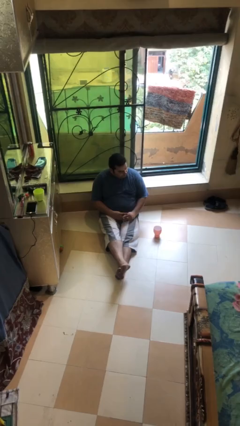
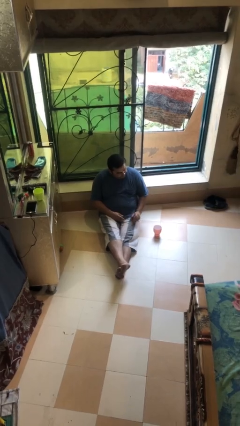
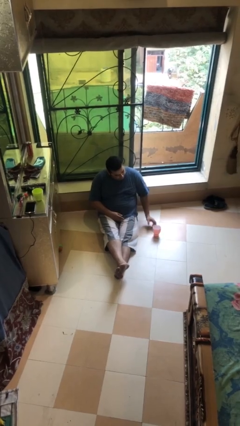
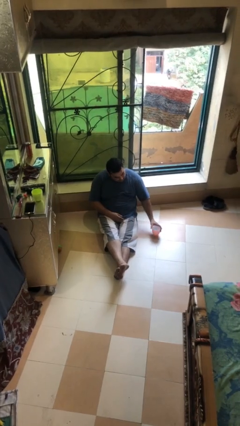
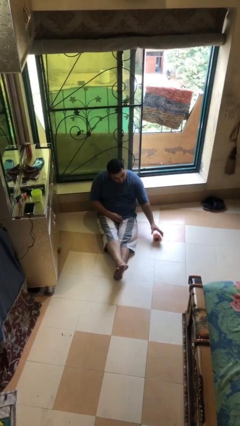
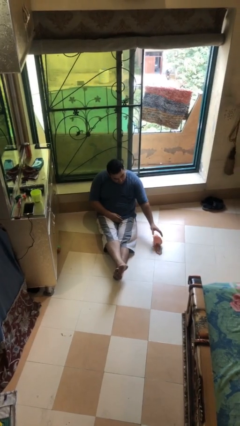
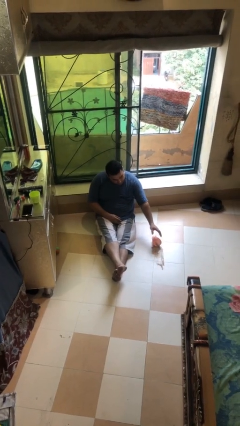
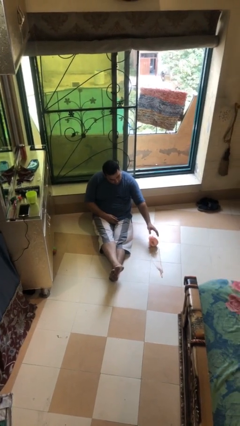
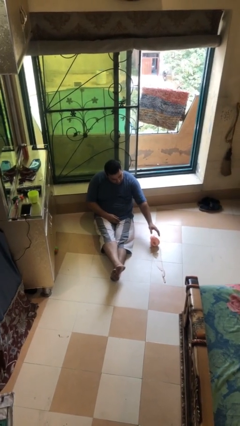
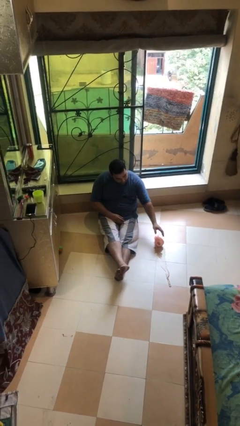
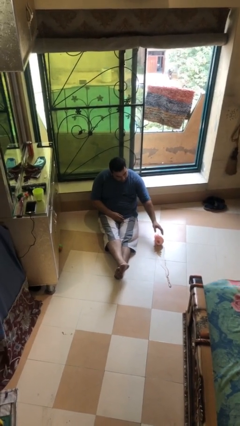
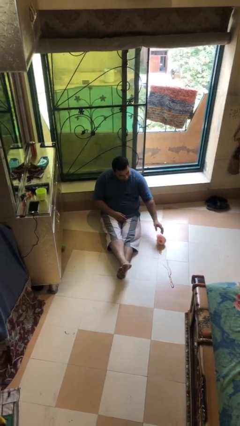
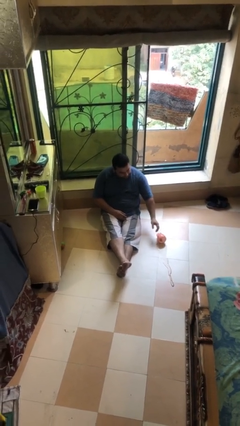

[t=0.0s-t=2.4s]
person spills on floor

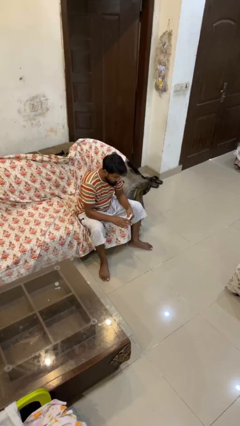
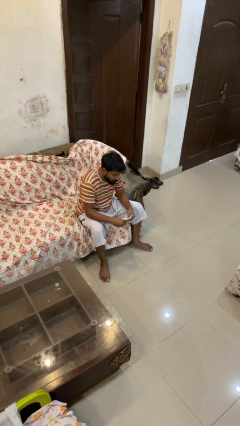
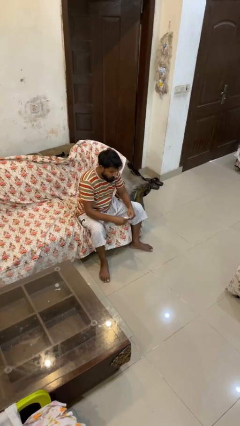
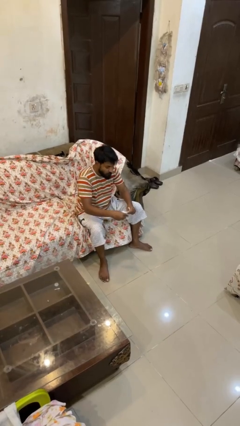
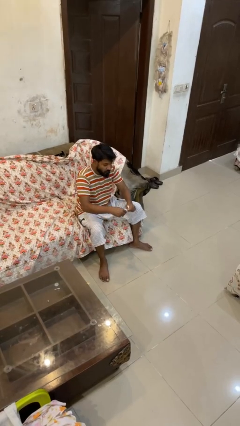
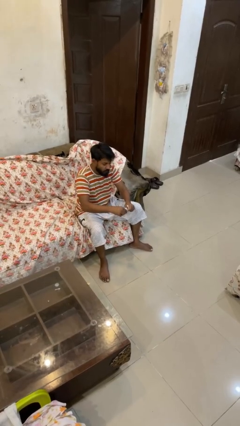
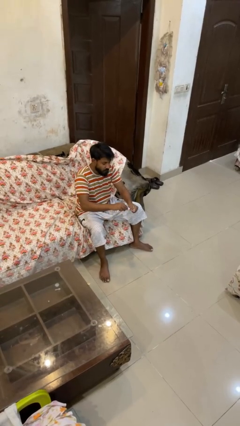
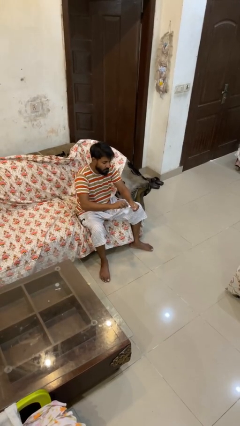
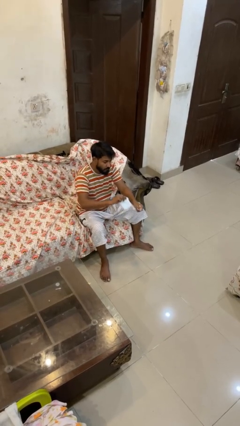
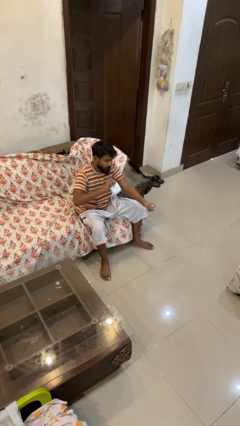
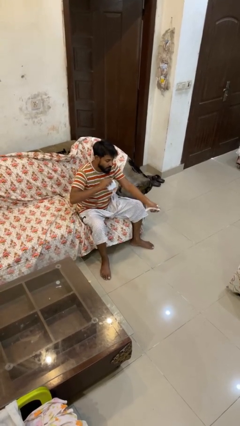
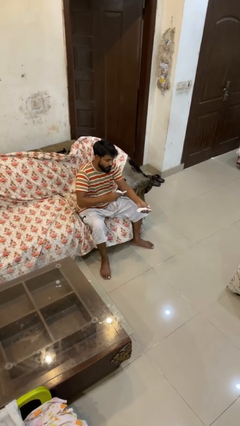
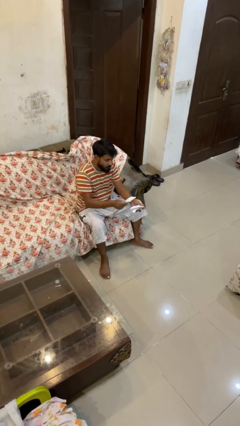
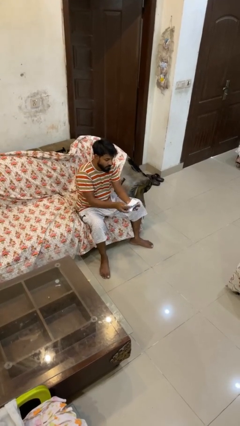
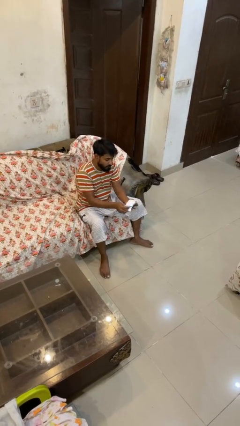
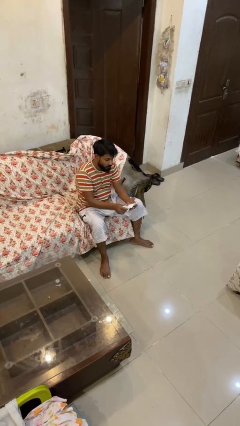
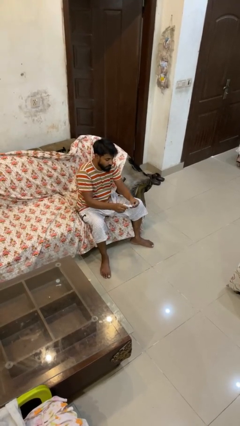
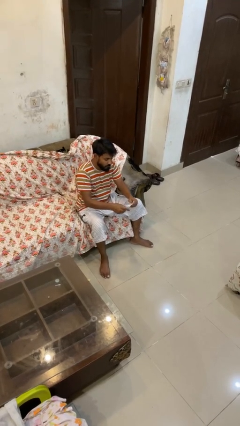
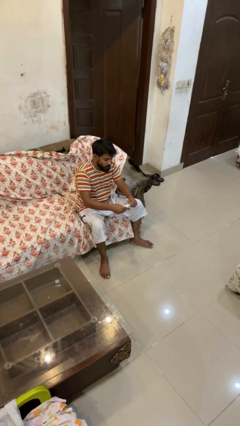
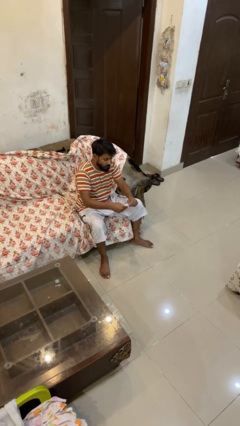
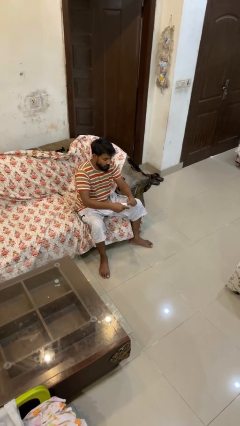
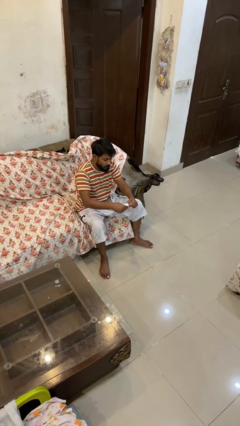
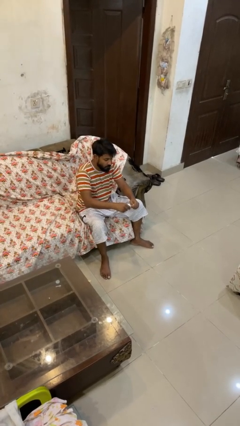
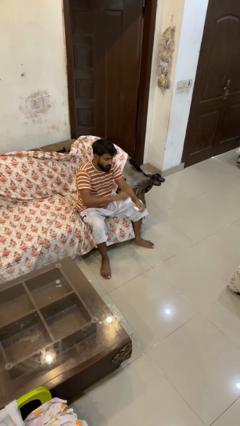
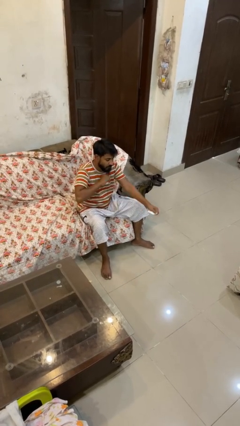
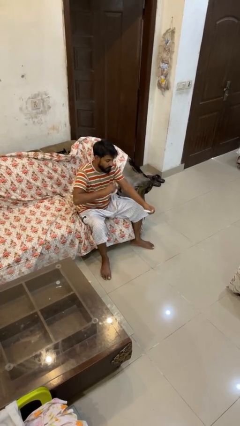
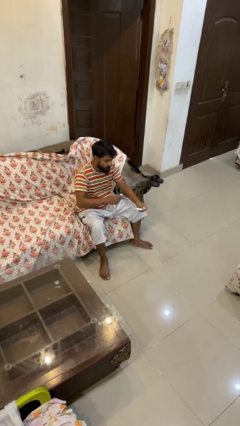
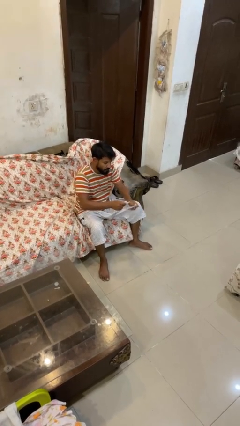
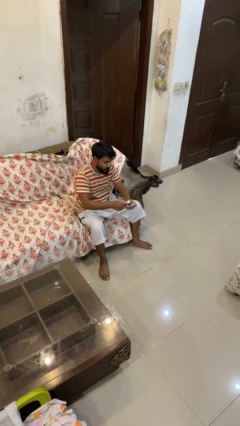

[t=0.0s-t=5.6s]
person tears paper

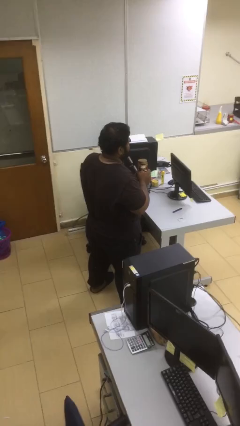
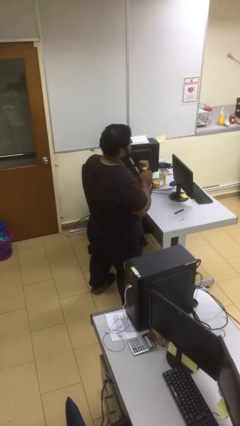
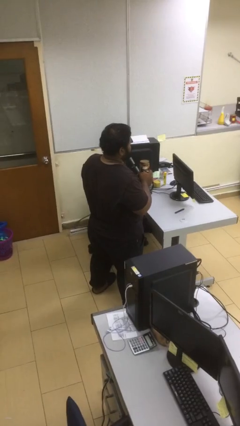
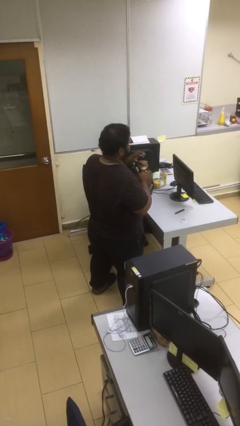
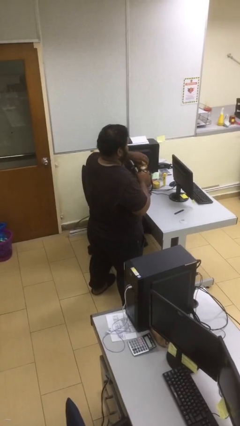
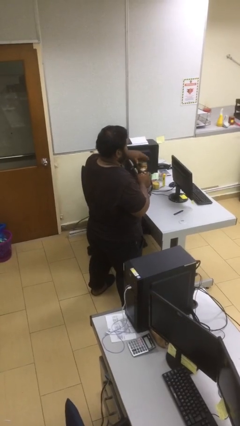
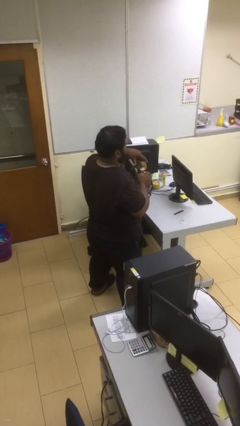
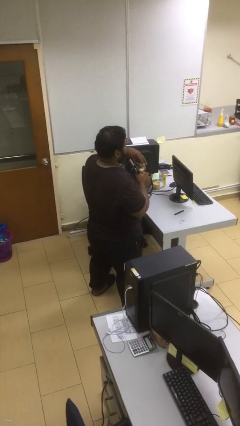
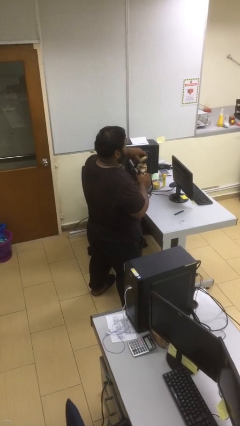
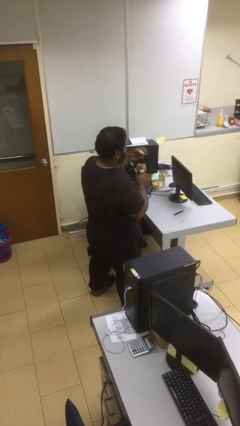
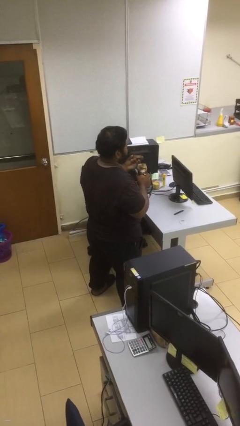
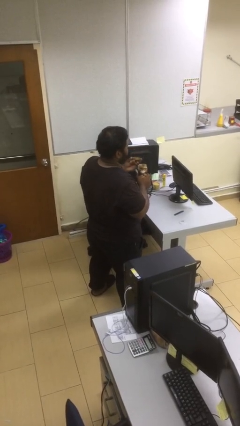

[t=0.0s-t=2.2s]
person opens jar

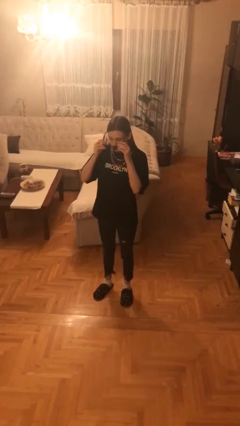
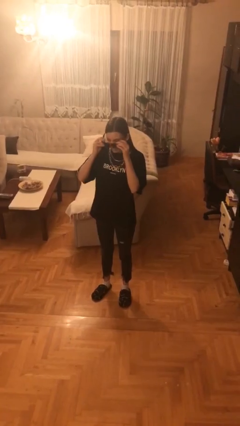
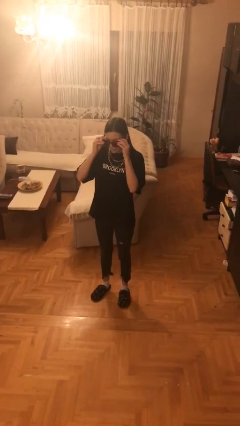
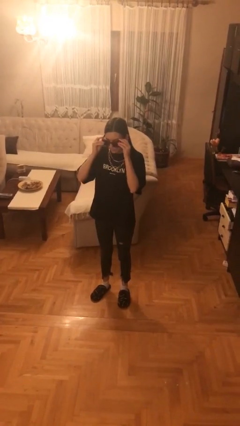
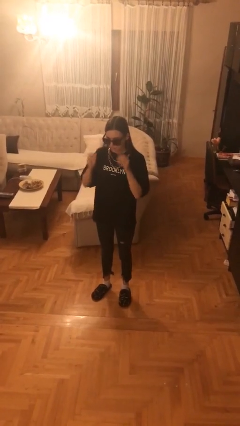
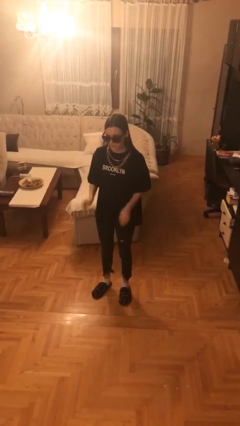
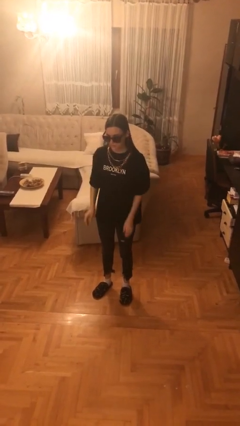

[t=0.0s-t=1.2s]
person puts on sunglasses

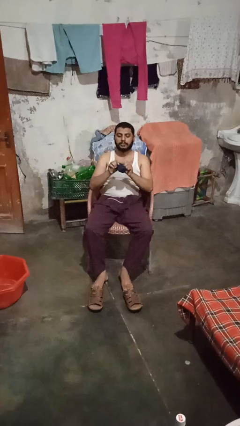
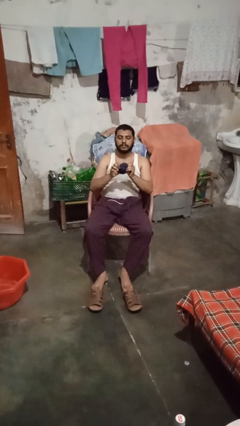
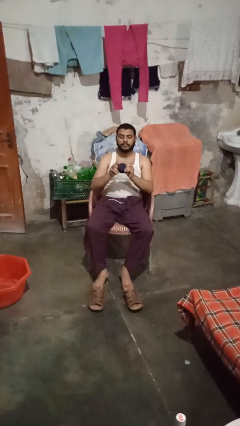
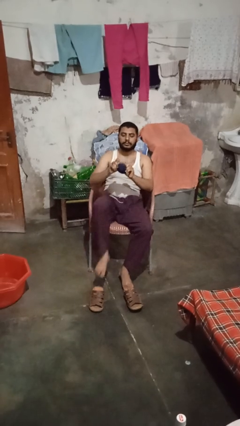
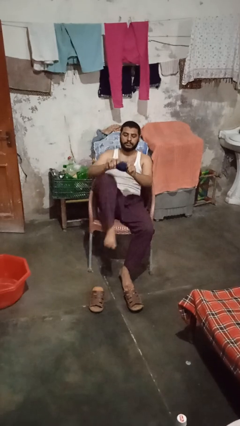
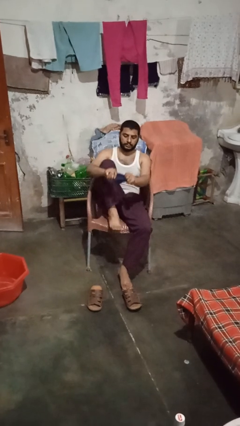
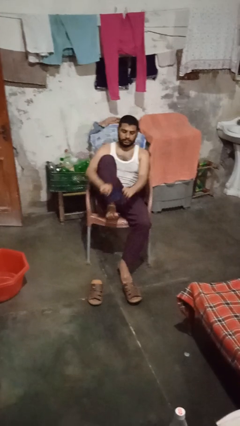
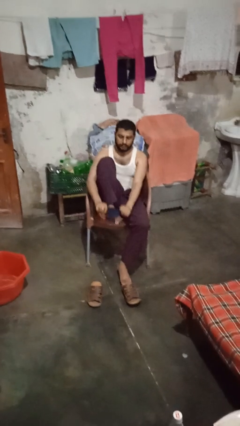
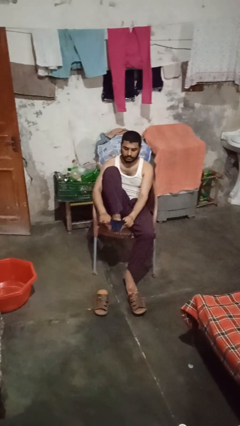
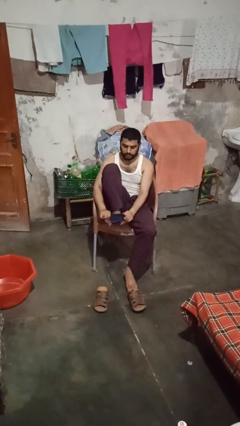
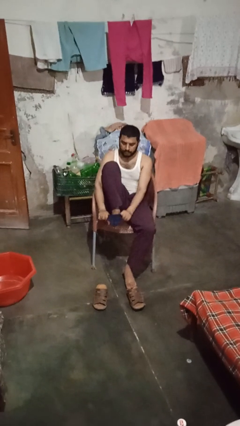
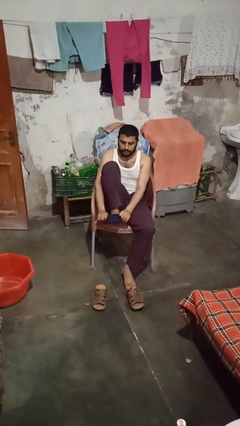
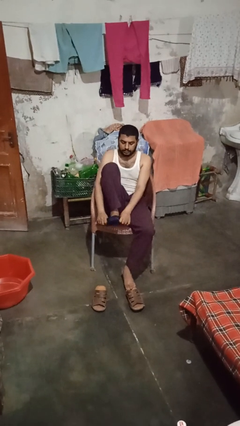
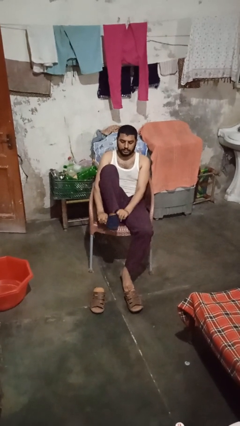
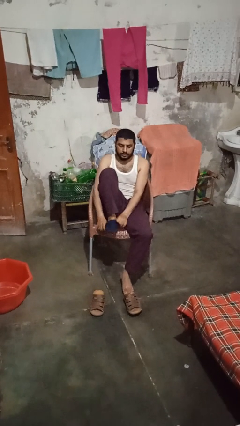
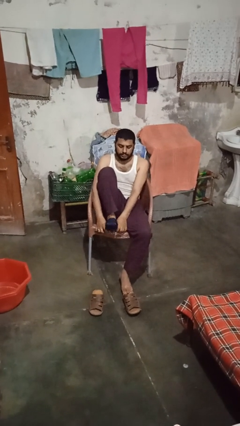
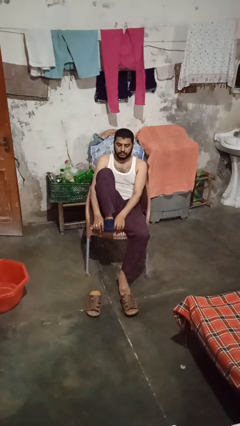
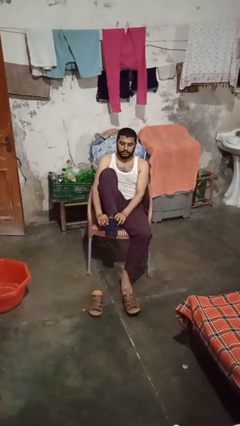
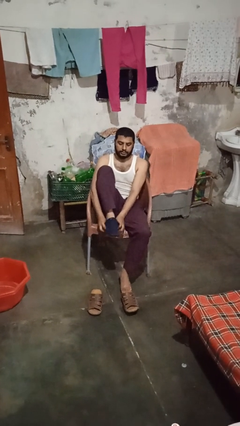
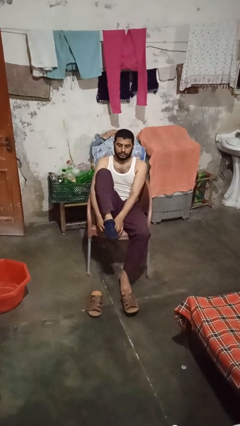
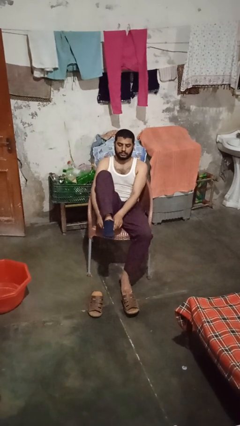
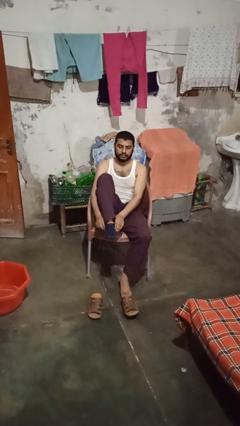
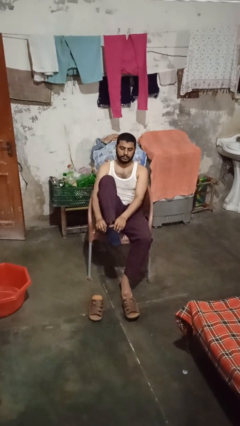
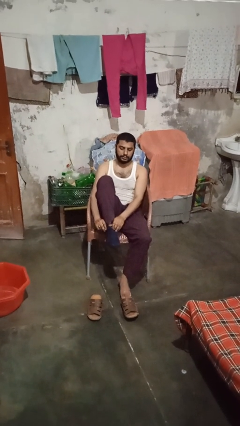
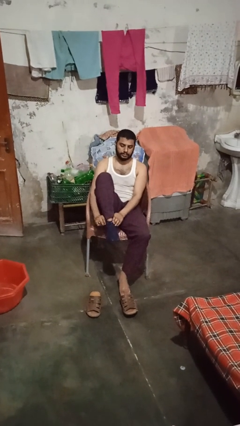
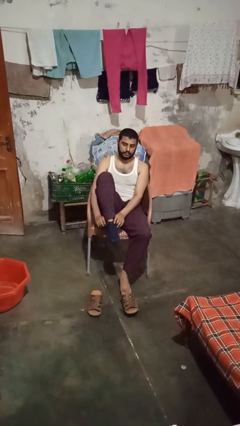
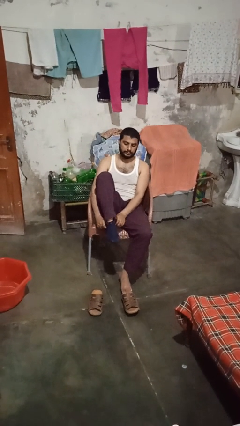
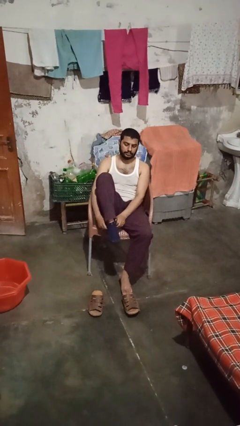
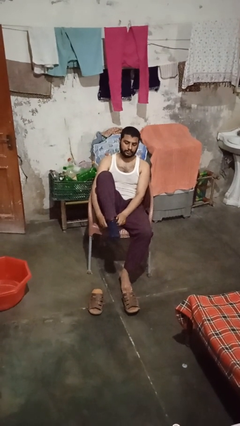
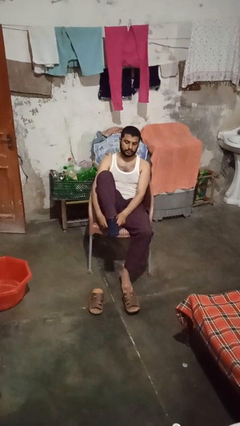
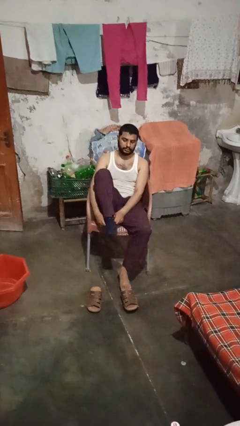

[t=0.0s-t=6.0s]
person puts on socks

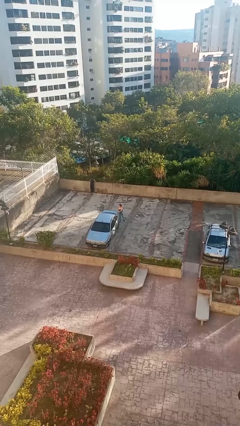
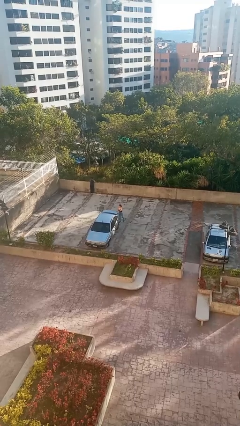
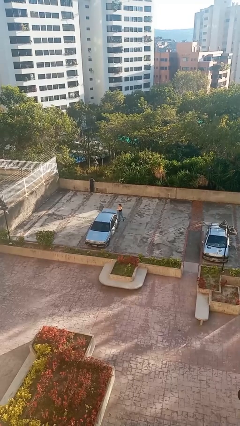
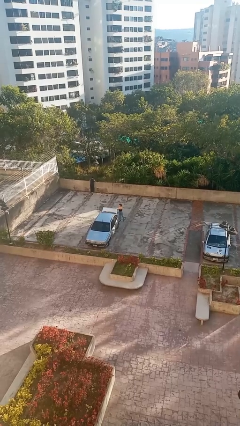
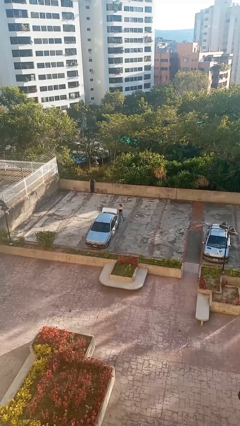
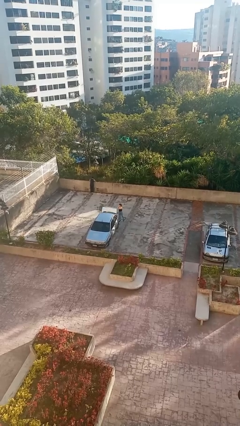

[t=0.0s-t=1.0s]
person opens car trunk
